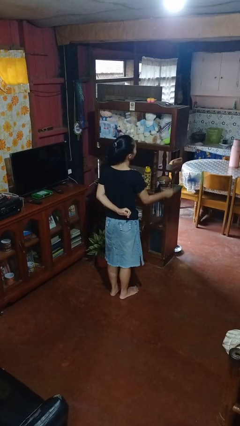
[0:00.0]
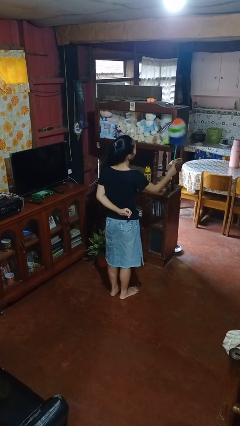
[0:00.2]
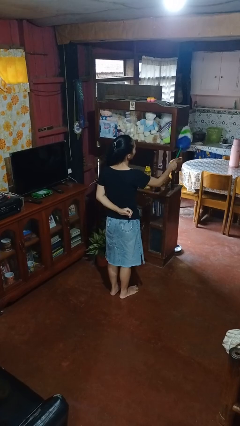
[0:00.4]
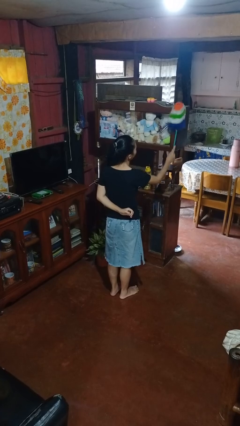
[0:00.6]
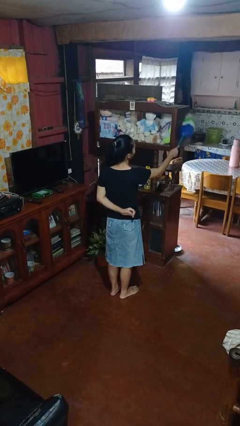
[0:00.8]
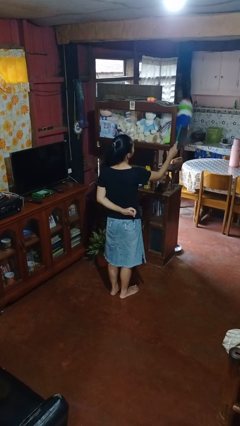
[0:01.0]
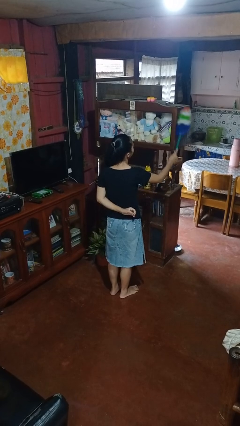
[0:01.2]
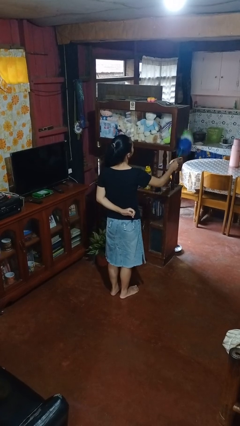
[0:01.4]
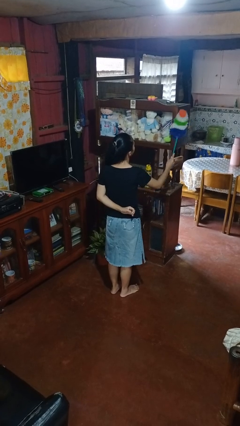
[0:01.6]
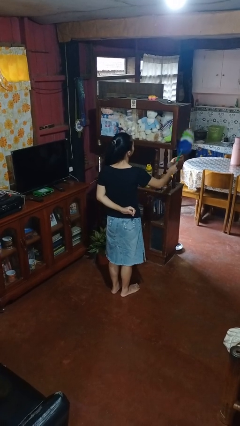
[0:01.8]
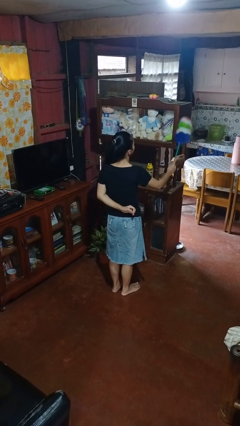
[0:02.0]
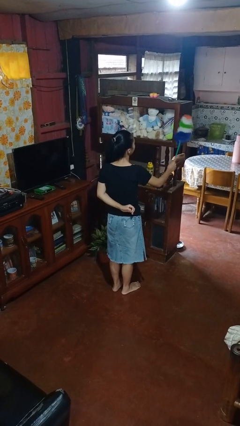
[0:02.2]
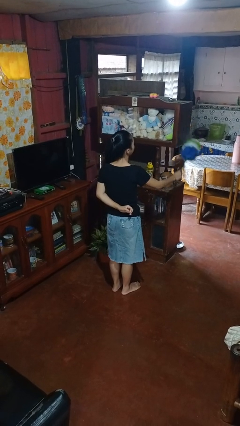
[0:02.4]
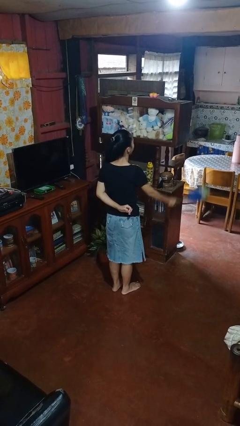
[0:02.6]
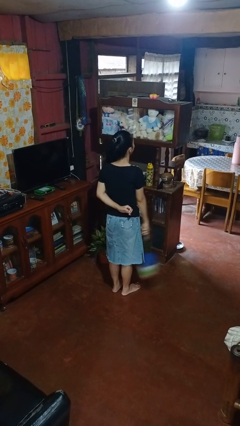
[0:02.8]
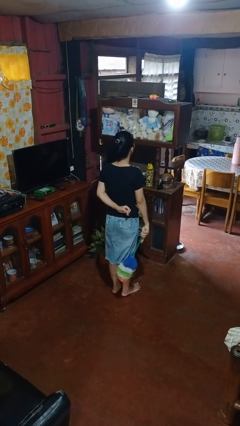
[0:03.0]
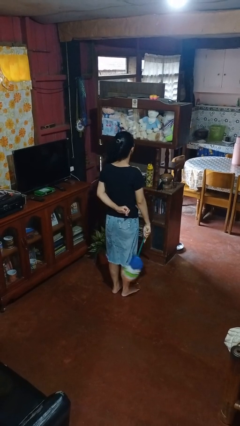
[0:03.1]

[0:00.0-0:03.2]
person dusts furniture

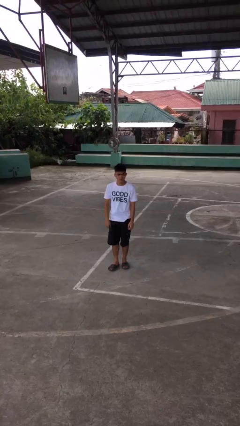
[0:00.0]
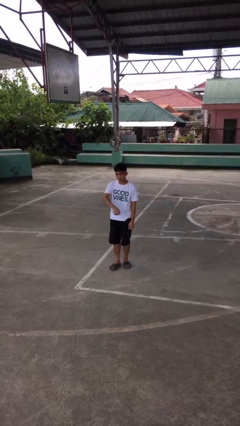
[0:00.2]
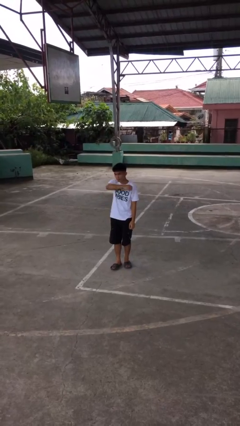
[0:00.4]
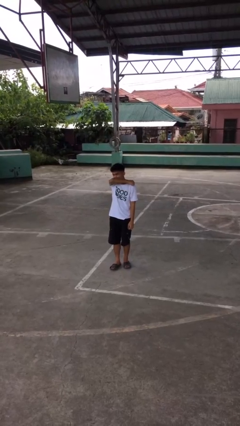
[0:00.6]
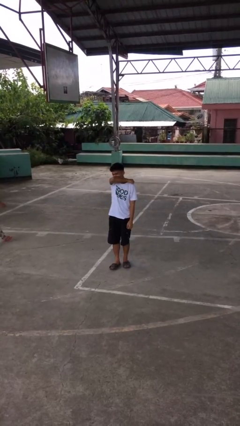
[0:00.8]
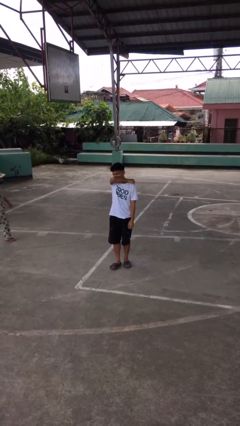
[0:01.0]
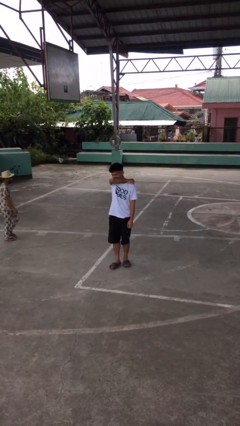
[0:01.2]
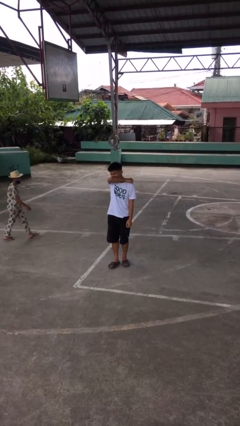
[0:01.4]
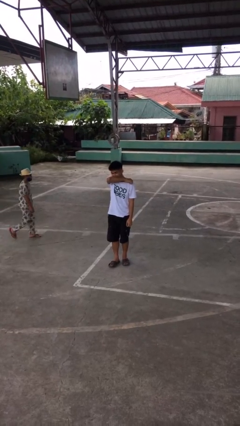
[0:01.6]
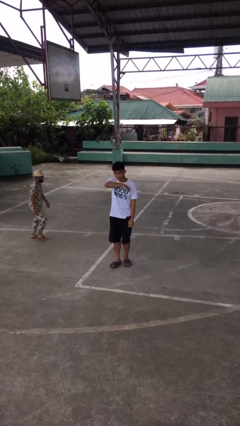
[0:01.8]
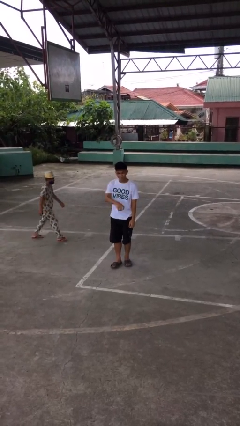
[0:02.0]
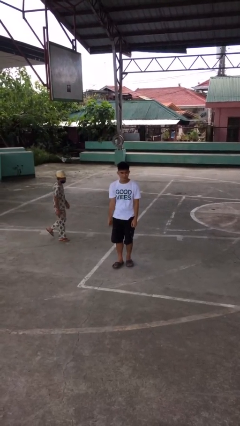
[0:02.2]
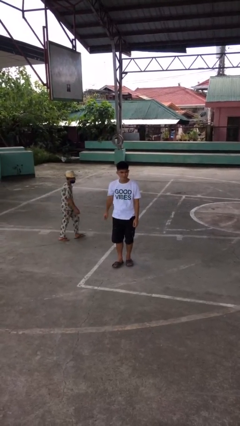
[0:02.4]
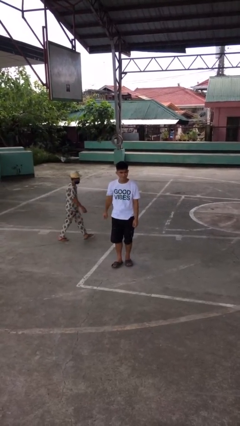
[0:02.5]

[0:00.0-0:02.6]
person sneezes into arm

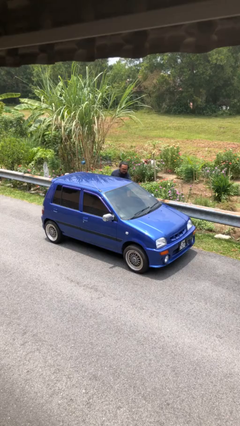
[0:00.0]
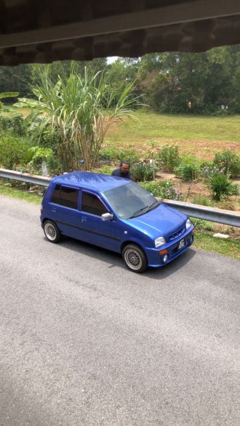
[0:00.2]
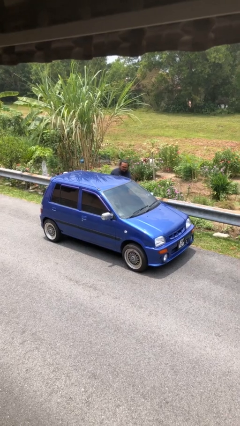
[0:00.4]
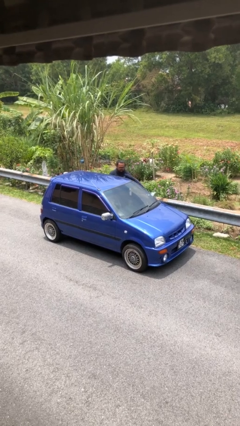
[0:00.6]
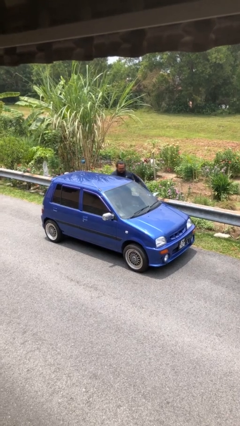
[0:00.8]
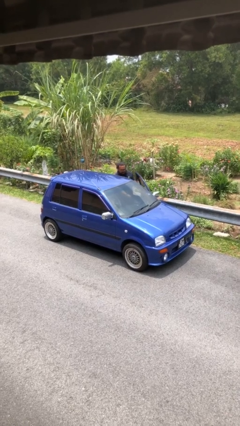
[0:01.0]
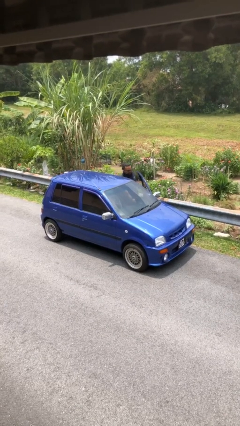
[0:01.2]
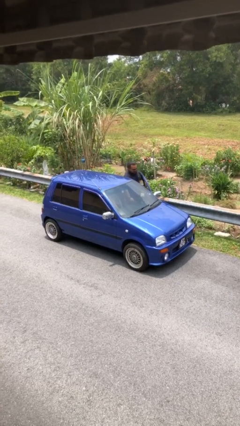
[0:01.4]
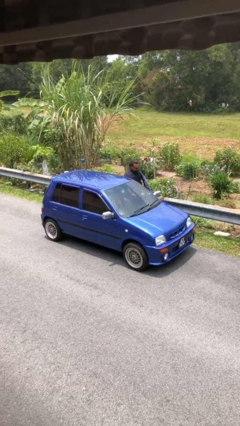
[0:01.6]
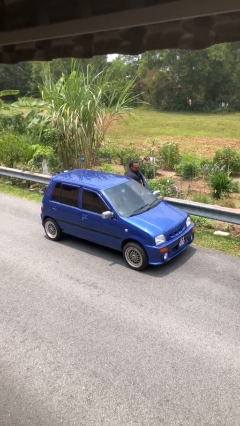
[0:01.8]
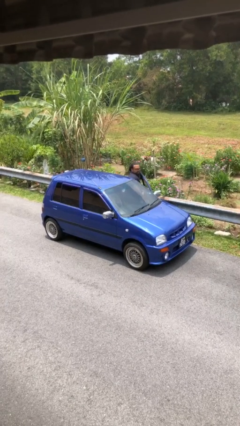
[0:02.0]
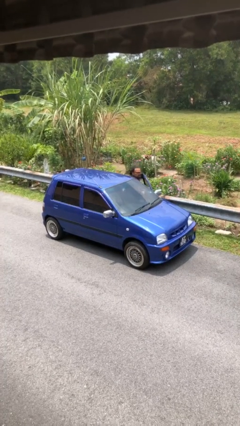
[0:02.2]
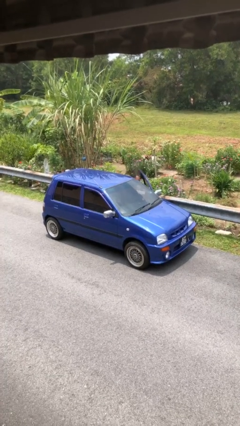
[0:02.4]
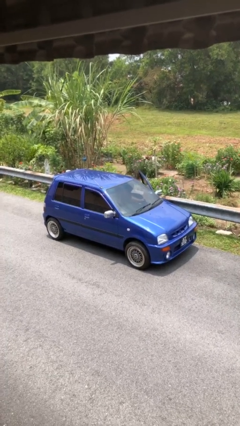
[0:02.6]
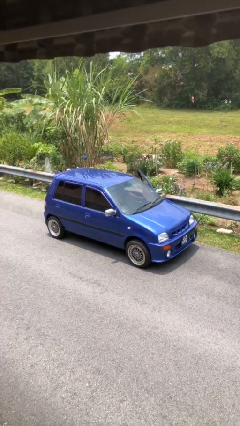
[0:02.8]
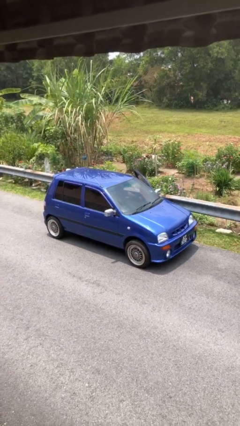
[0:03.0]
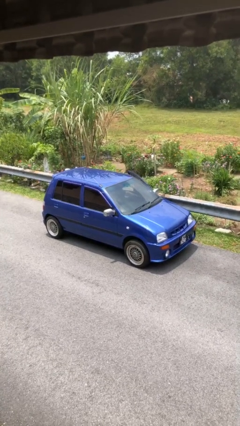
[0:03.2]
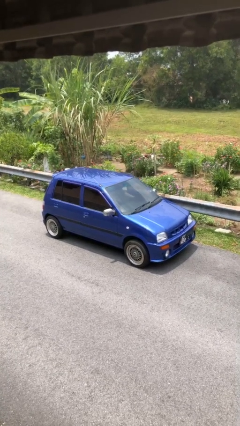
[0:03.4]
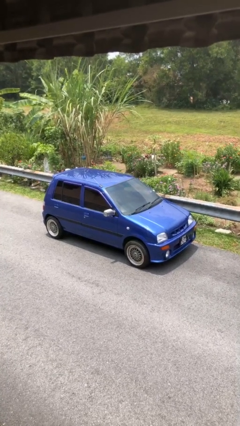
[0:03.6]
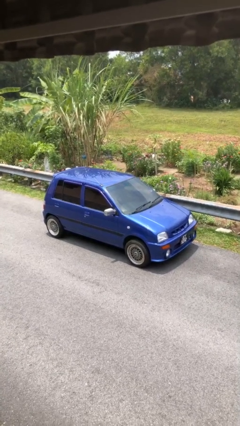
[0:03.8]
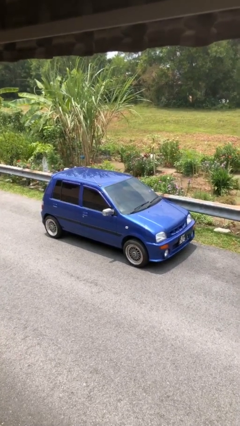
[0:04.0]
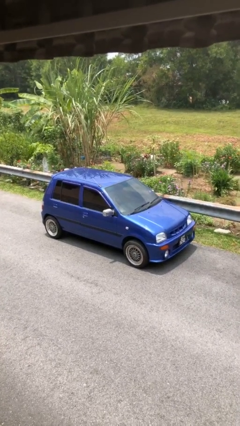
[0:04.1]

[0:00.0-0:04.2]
car picks up person

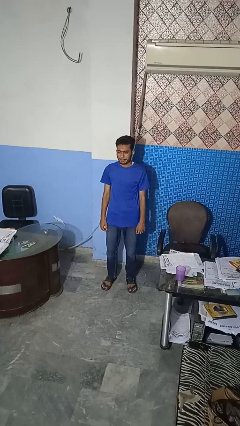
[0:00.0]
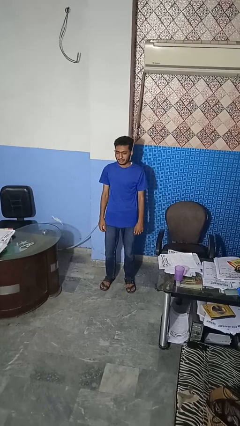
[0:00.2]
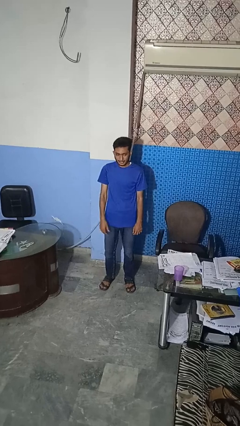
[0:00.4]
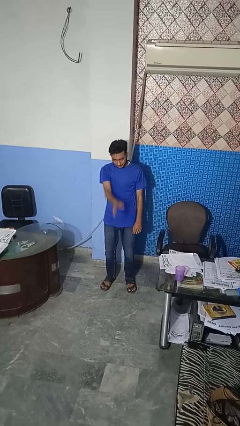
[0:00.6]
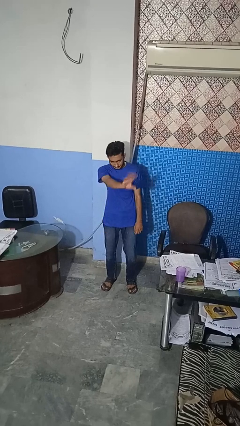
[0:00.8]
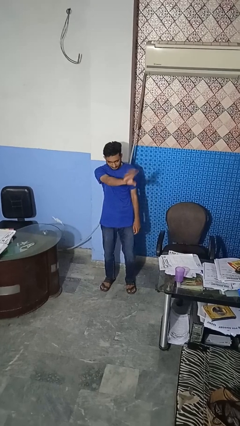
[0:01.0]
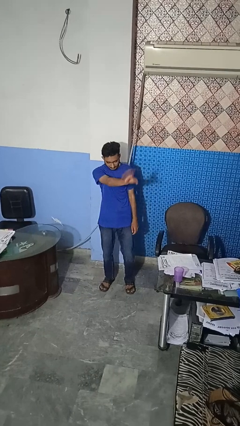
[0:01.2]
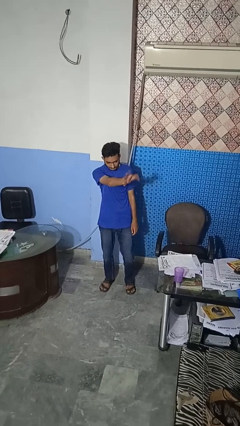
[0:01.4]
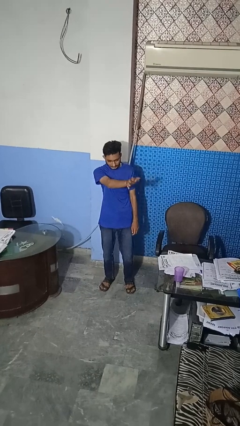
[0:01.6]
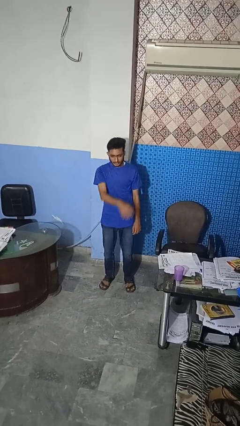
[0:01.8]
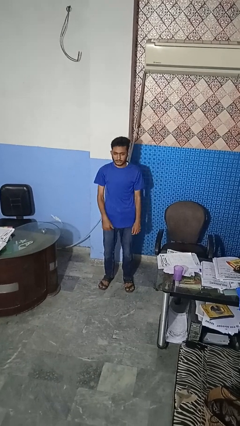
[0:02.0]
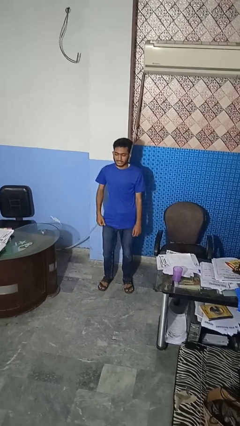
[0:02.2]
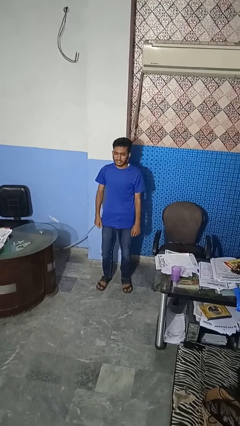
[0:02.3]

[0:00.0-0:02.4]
person waves at person

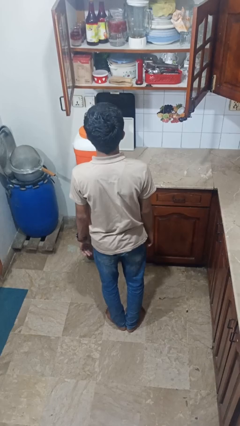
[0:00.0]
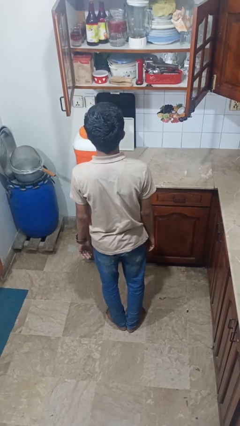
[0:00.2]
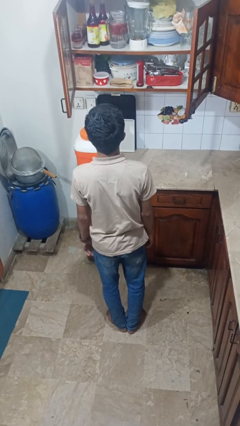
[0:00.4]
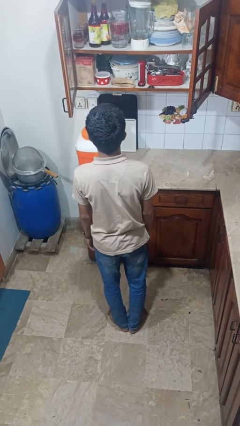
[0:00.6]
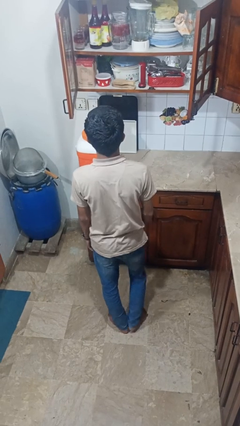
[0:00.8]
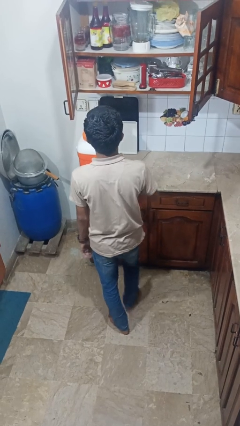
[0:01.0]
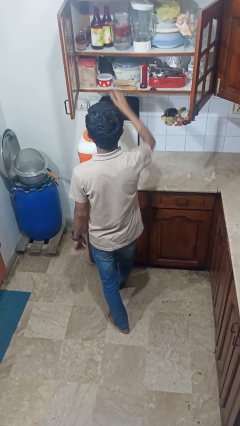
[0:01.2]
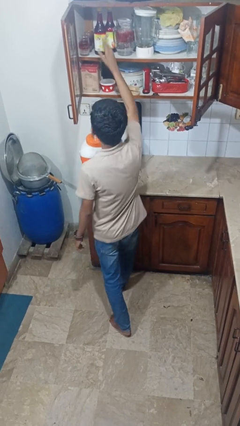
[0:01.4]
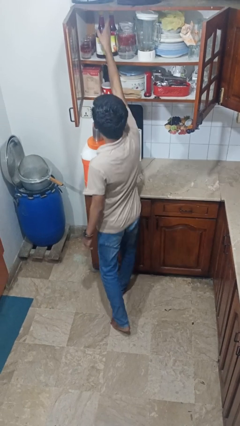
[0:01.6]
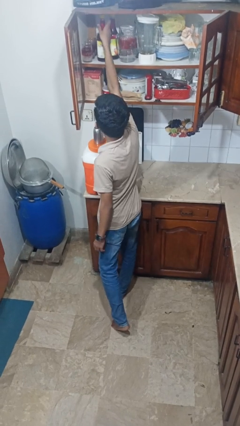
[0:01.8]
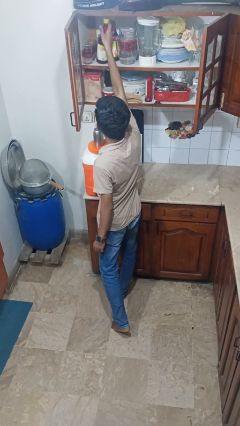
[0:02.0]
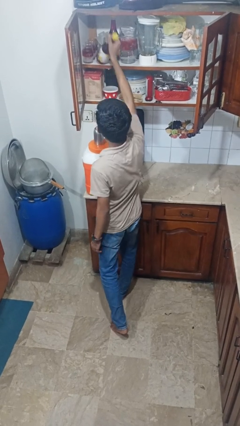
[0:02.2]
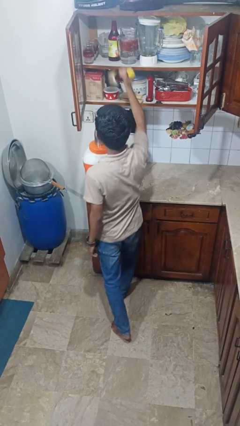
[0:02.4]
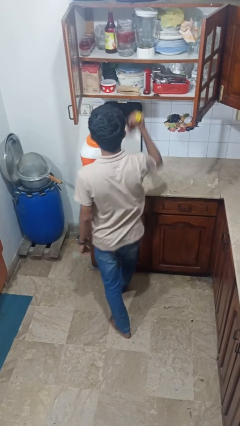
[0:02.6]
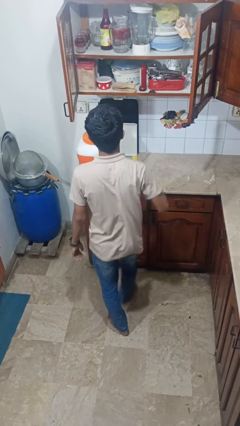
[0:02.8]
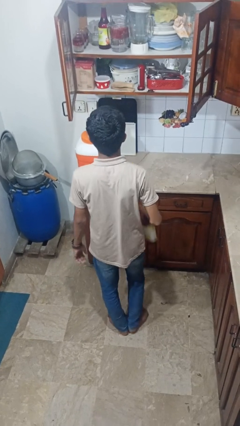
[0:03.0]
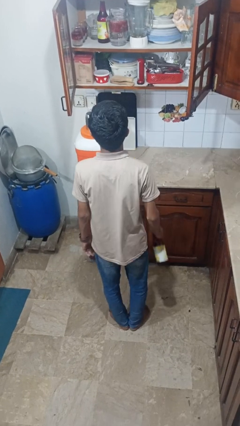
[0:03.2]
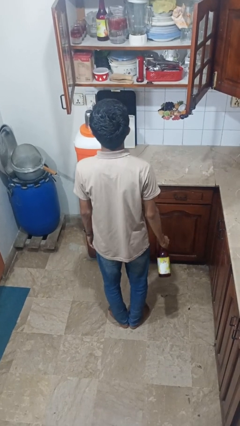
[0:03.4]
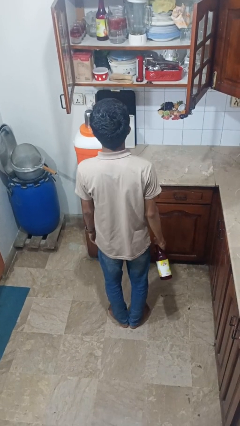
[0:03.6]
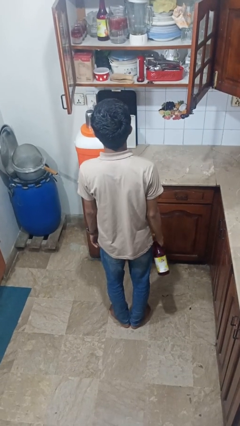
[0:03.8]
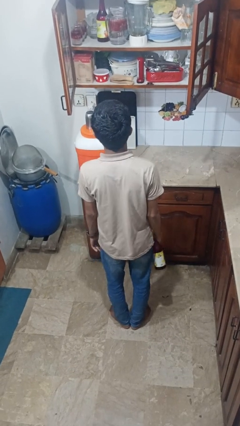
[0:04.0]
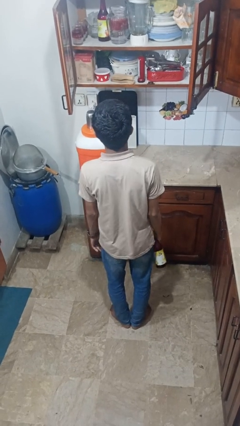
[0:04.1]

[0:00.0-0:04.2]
person picks up object from cabinet

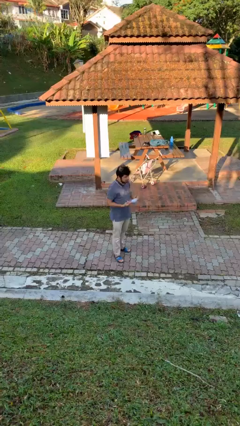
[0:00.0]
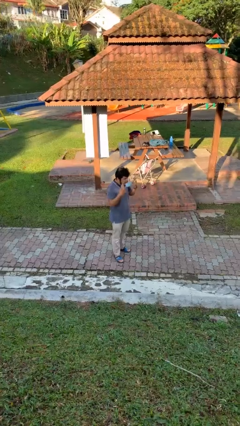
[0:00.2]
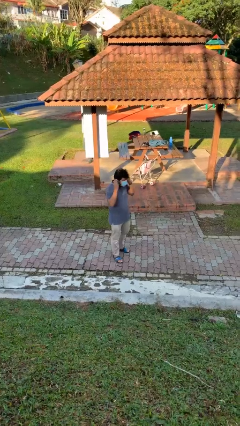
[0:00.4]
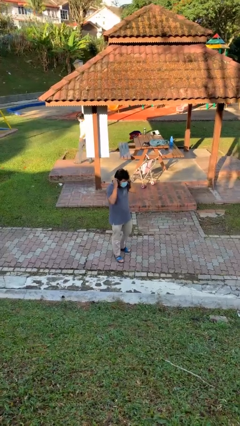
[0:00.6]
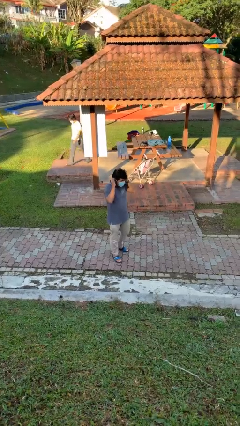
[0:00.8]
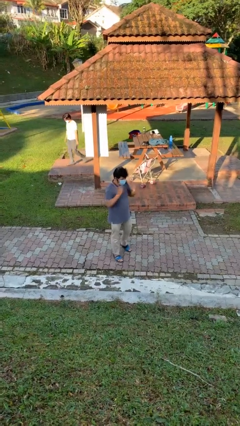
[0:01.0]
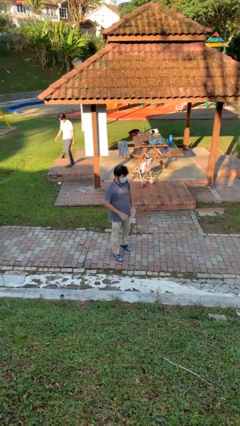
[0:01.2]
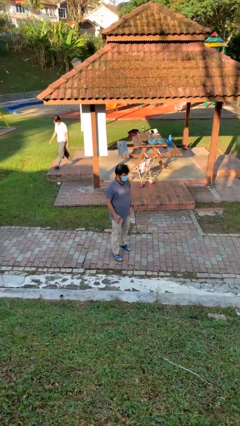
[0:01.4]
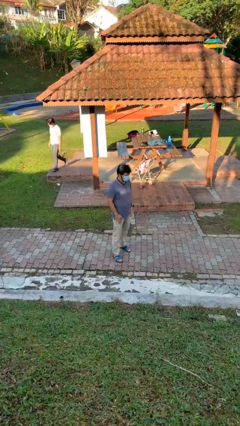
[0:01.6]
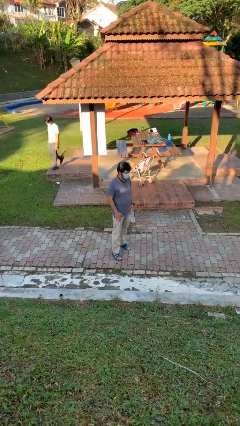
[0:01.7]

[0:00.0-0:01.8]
person puts on facemask
